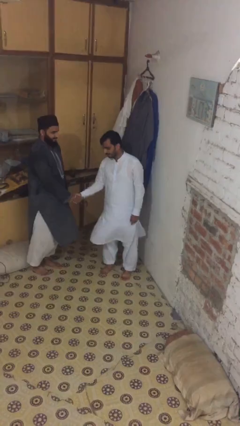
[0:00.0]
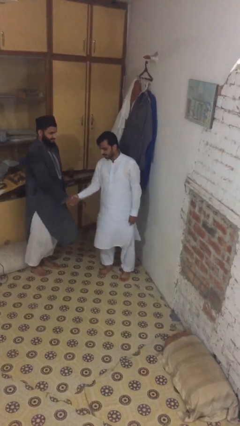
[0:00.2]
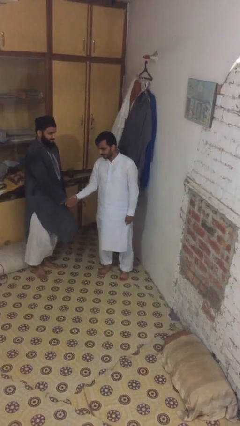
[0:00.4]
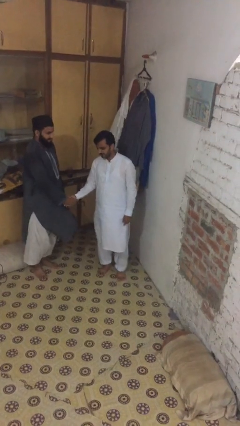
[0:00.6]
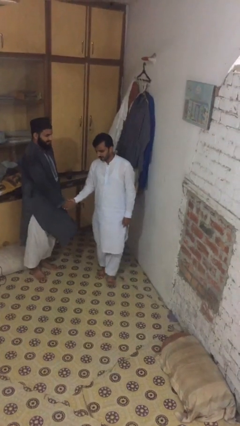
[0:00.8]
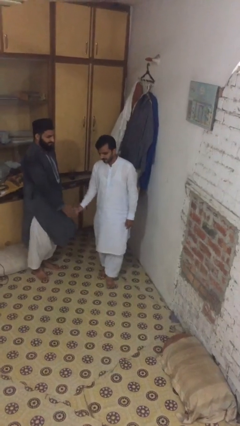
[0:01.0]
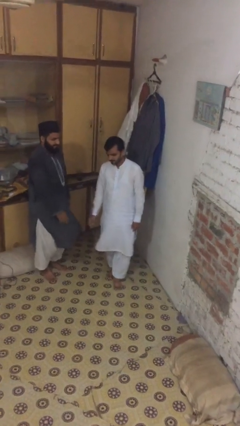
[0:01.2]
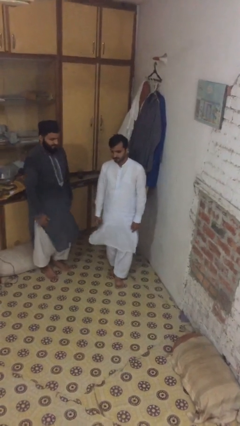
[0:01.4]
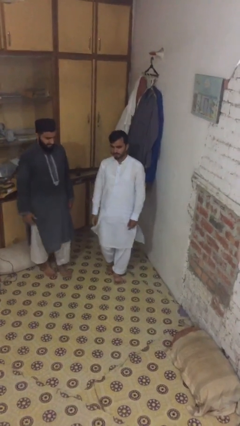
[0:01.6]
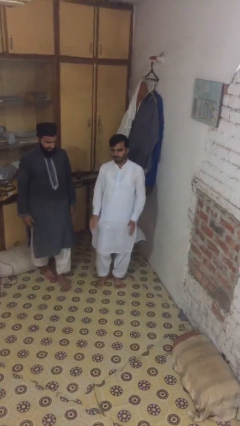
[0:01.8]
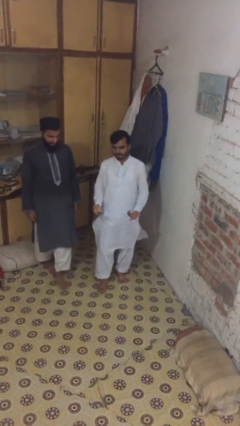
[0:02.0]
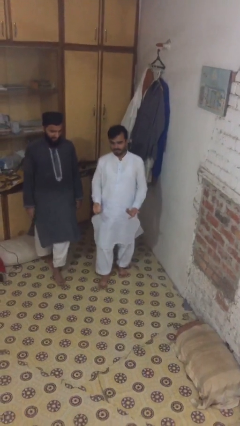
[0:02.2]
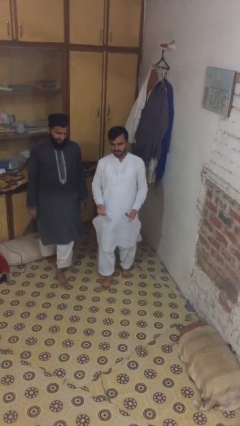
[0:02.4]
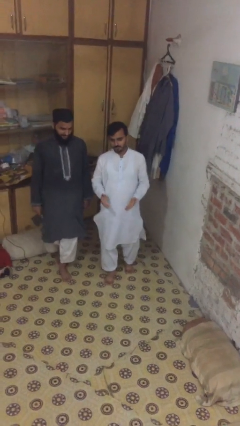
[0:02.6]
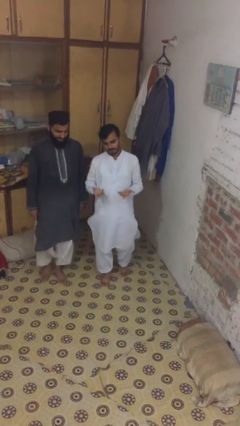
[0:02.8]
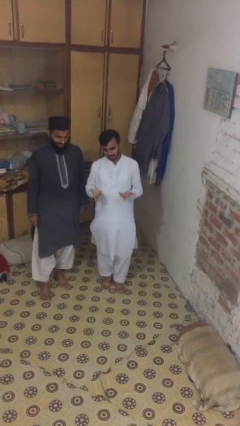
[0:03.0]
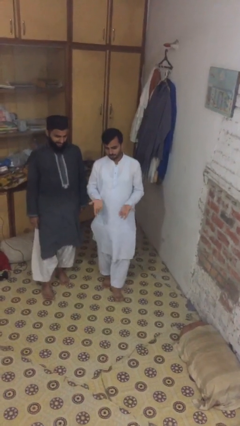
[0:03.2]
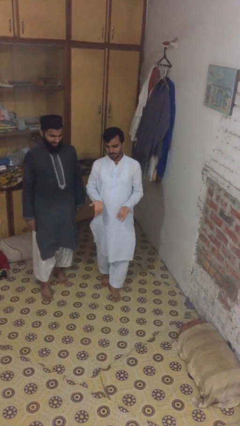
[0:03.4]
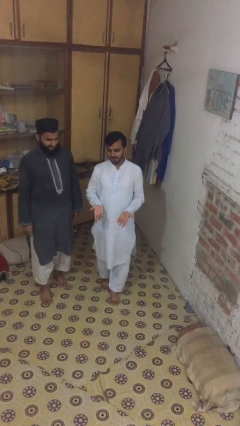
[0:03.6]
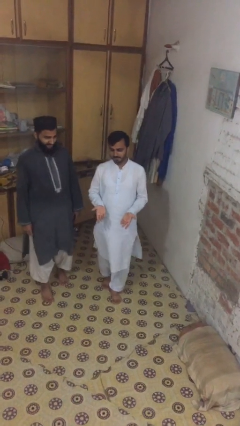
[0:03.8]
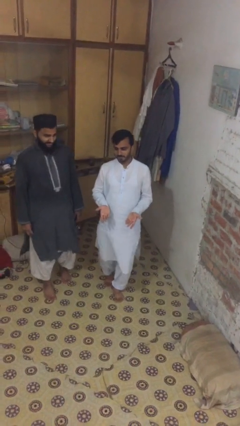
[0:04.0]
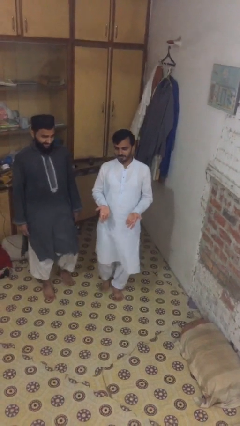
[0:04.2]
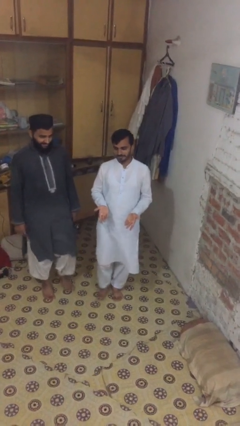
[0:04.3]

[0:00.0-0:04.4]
person talks to person

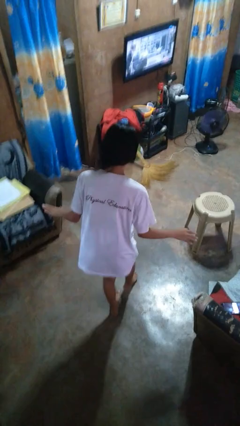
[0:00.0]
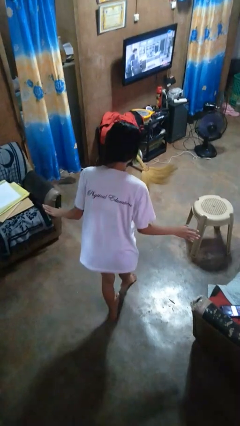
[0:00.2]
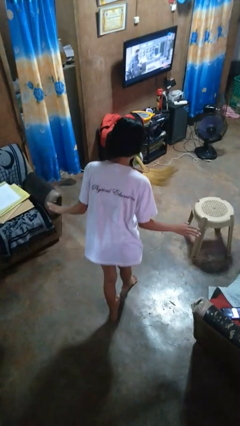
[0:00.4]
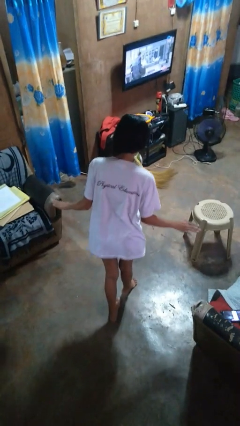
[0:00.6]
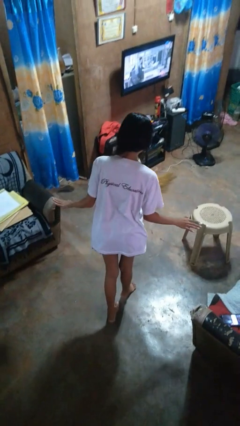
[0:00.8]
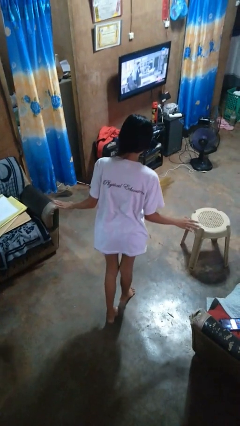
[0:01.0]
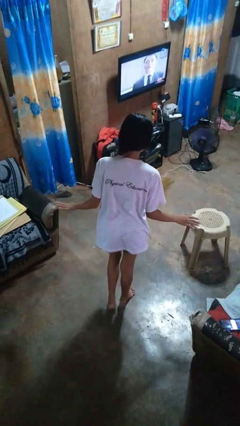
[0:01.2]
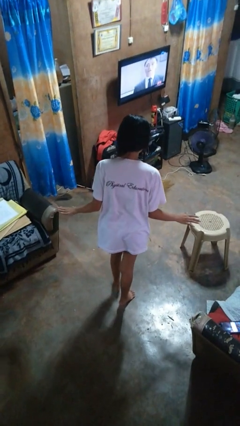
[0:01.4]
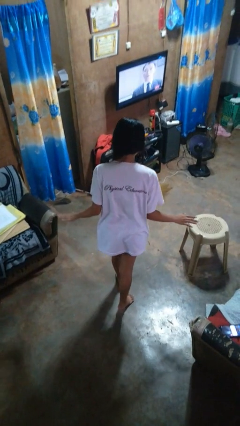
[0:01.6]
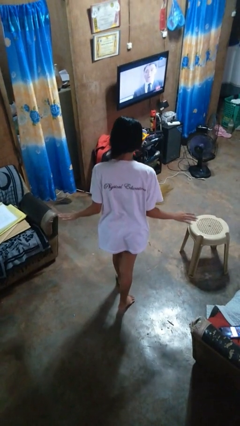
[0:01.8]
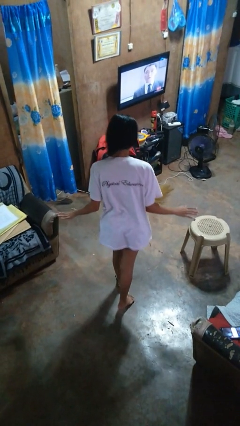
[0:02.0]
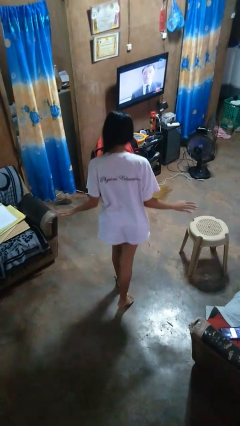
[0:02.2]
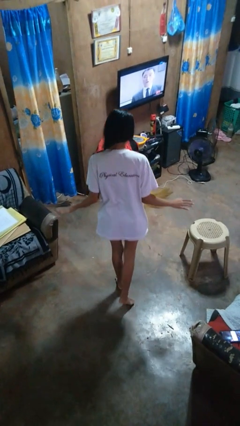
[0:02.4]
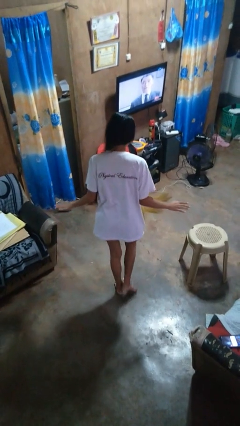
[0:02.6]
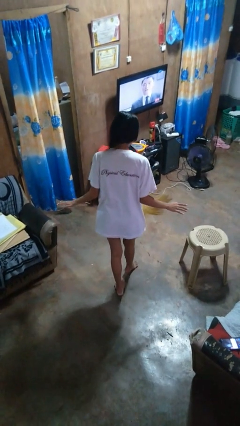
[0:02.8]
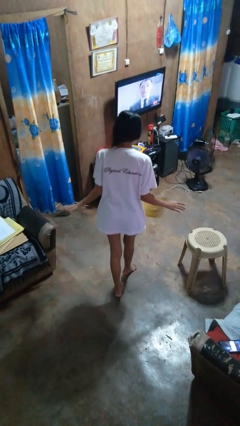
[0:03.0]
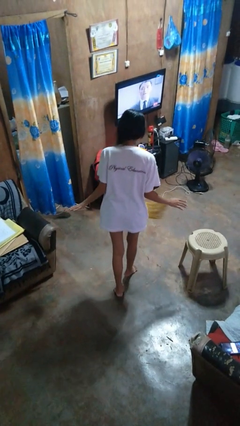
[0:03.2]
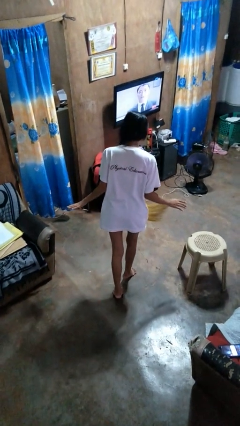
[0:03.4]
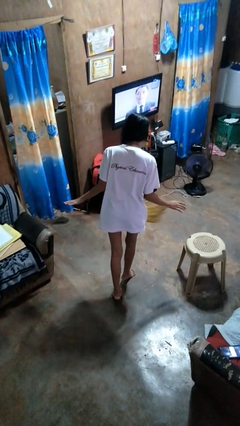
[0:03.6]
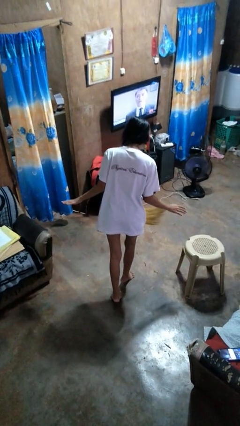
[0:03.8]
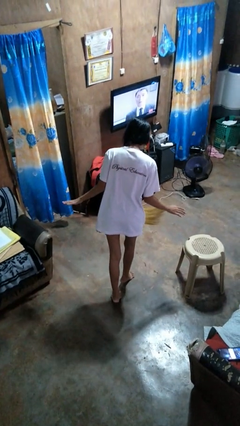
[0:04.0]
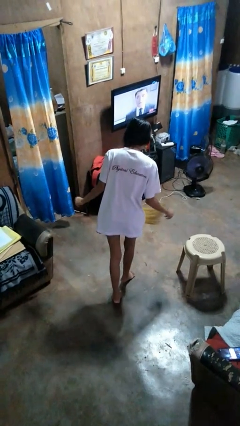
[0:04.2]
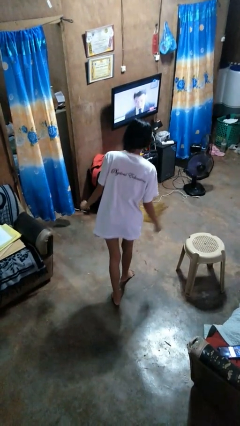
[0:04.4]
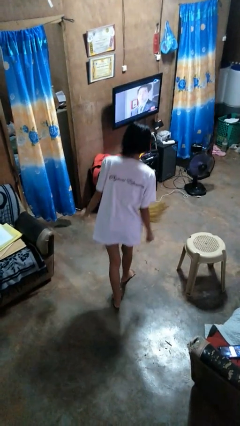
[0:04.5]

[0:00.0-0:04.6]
person walks tiptoe

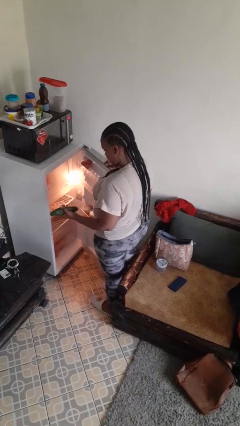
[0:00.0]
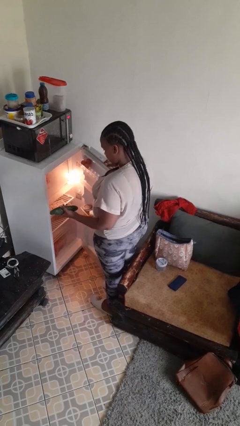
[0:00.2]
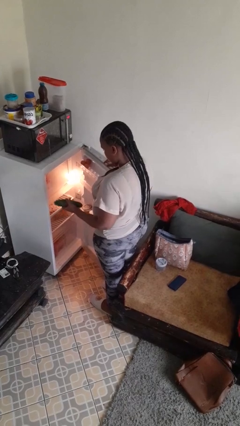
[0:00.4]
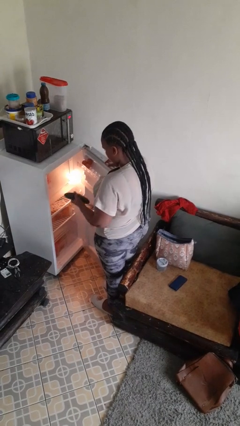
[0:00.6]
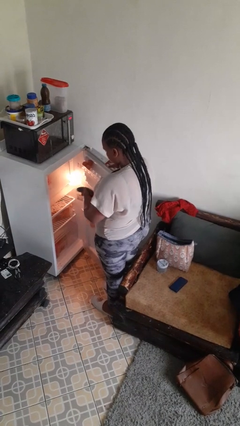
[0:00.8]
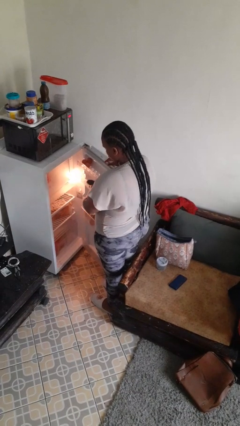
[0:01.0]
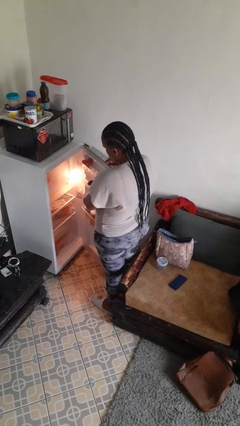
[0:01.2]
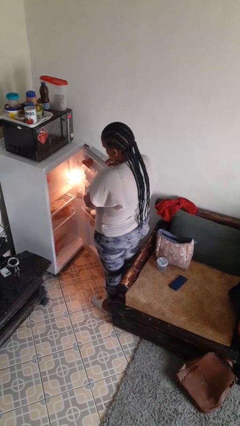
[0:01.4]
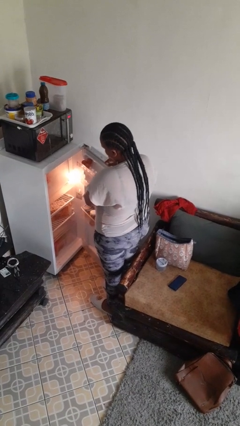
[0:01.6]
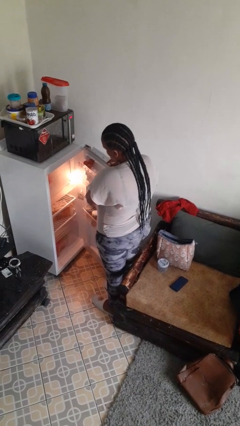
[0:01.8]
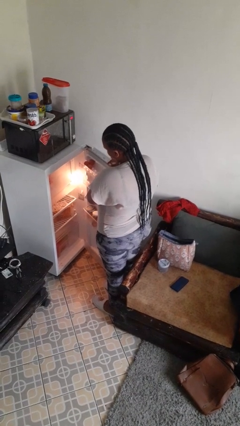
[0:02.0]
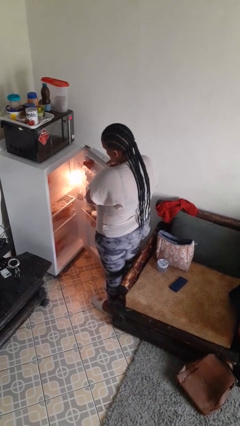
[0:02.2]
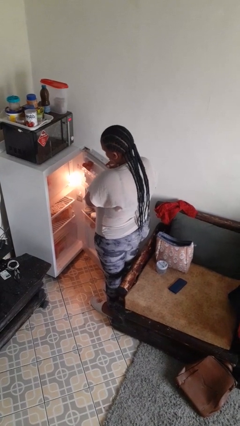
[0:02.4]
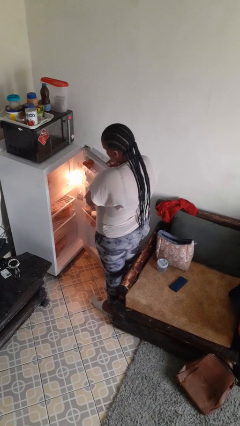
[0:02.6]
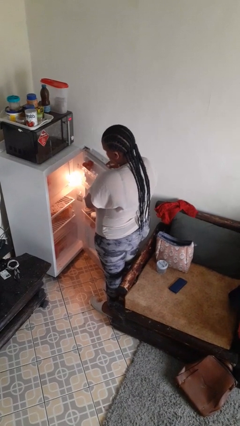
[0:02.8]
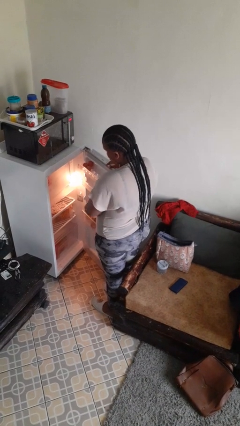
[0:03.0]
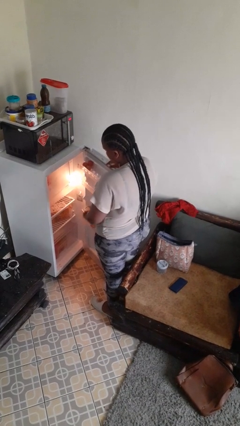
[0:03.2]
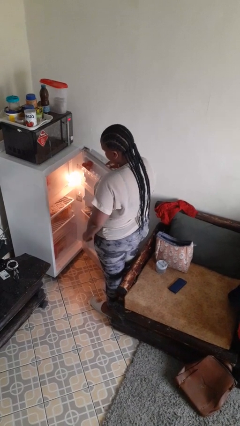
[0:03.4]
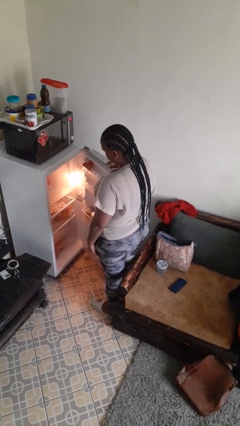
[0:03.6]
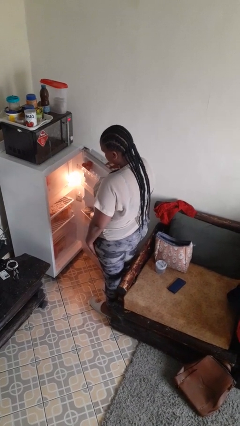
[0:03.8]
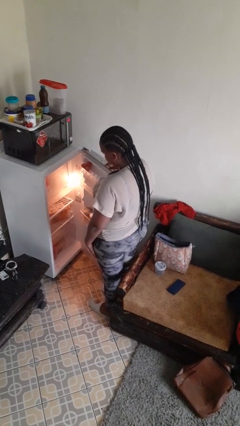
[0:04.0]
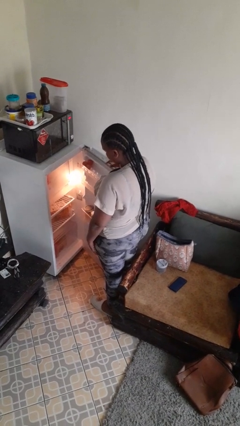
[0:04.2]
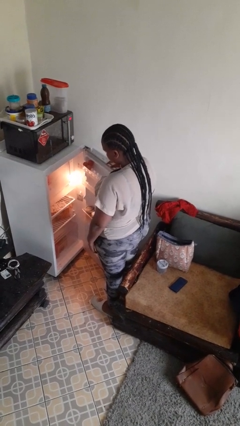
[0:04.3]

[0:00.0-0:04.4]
person puts object into refrigerator

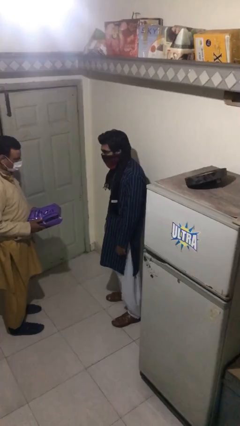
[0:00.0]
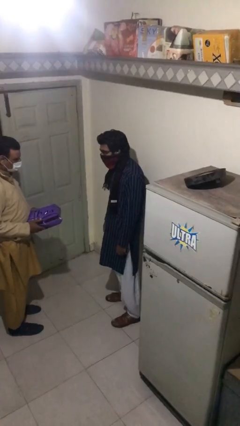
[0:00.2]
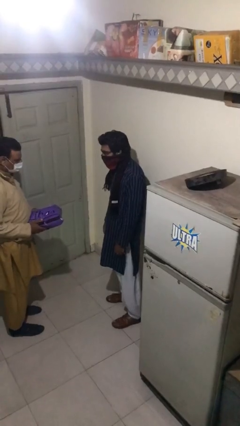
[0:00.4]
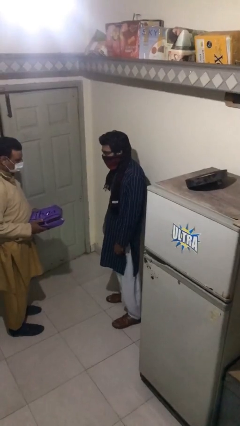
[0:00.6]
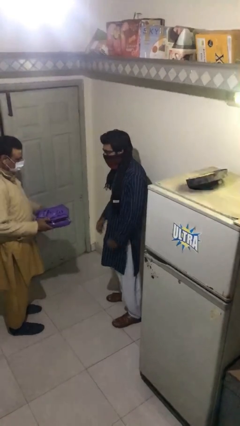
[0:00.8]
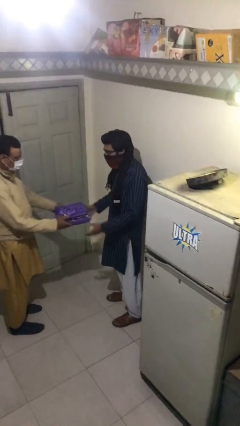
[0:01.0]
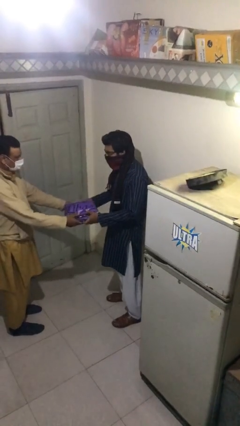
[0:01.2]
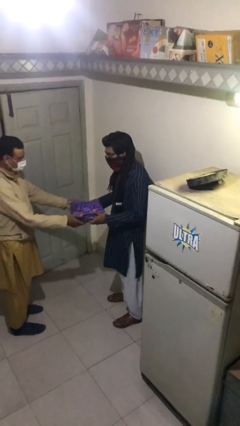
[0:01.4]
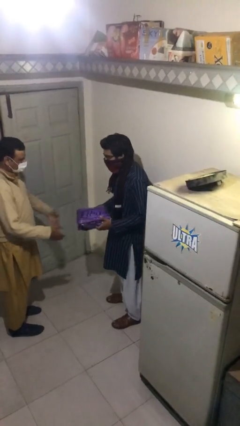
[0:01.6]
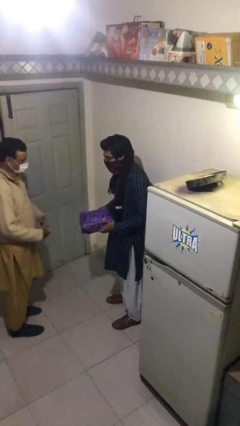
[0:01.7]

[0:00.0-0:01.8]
person transfers object to person

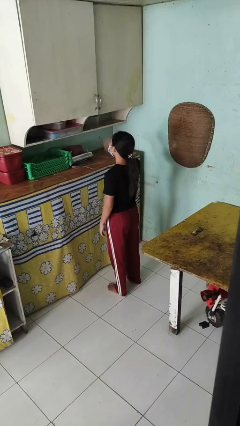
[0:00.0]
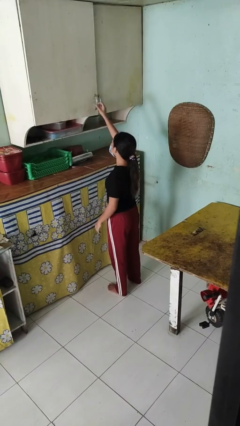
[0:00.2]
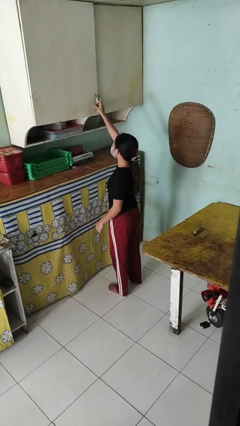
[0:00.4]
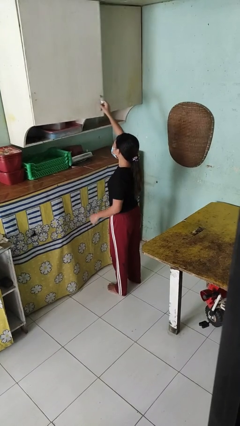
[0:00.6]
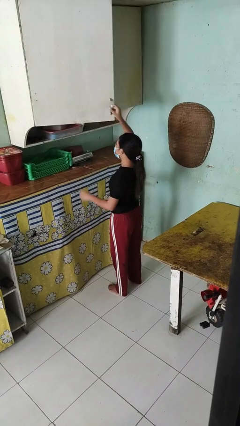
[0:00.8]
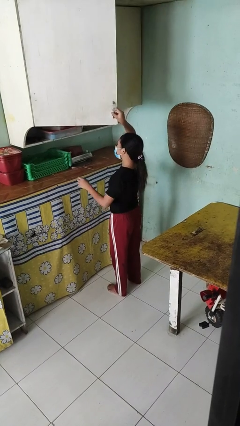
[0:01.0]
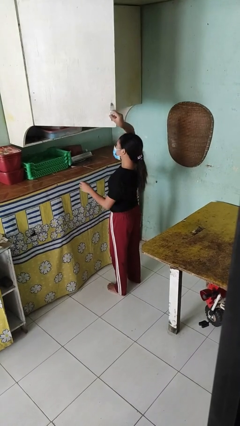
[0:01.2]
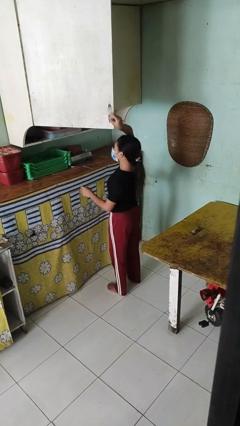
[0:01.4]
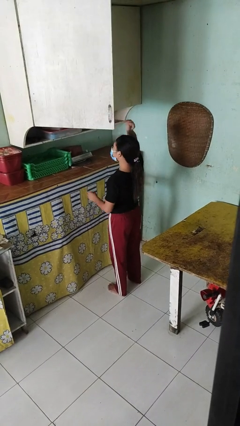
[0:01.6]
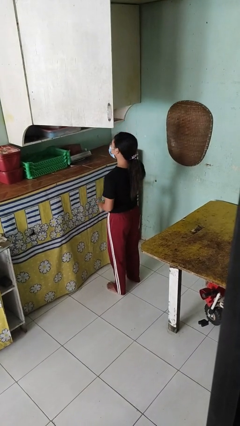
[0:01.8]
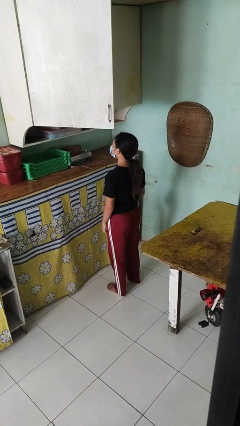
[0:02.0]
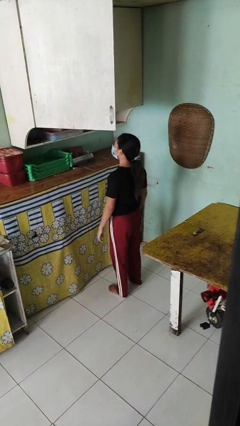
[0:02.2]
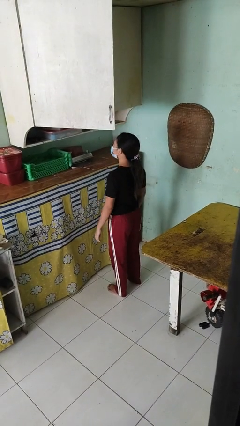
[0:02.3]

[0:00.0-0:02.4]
person opens cabinet
